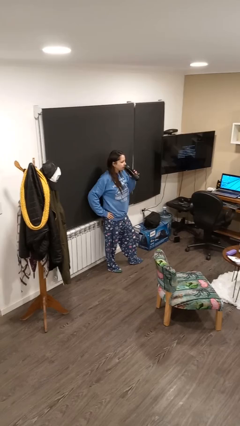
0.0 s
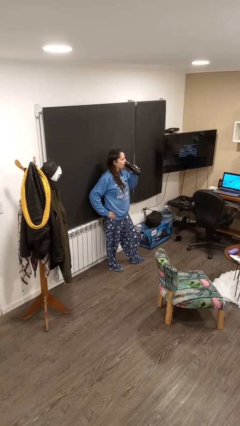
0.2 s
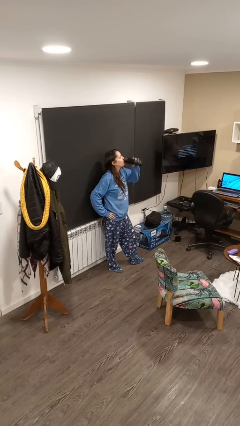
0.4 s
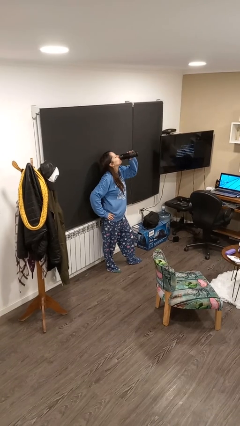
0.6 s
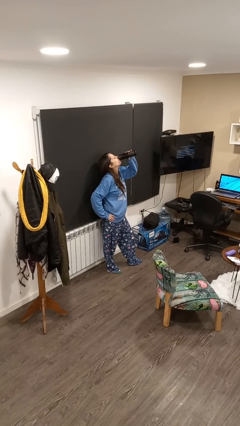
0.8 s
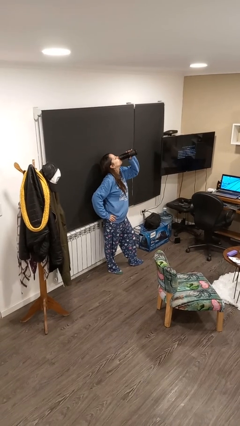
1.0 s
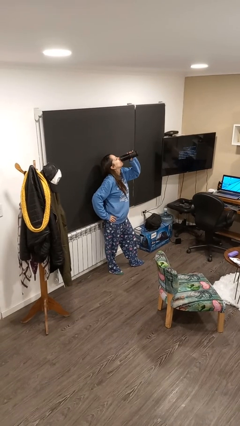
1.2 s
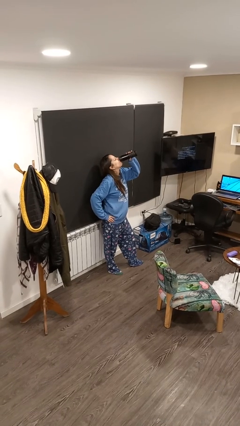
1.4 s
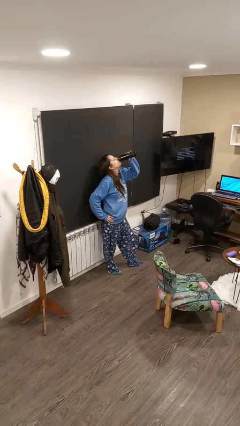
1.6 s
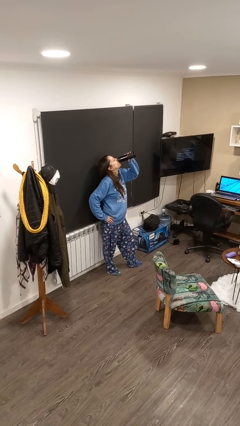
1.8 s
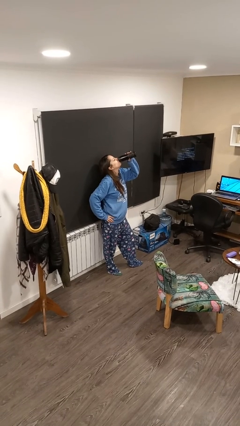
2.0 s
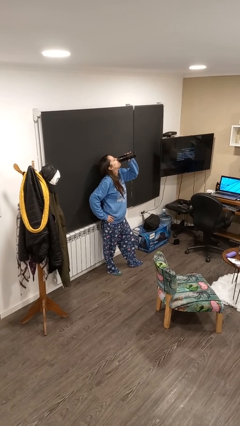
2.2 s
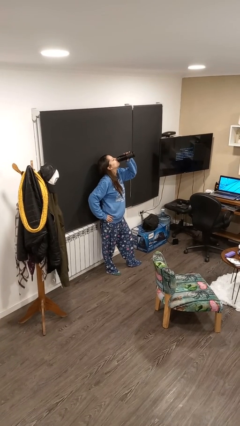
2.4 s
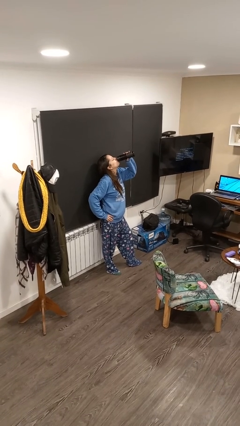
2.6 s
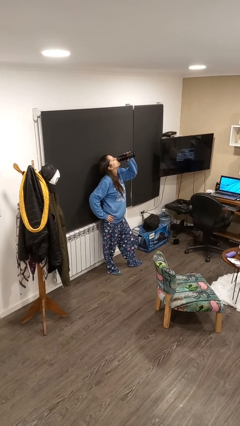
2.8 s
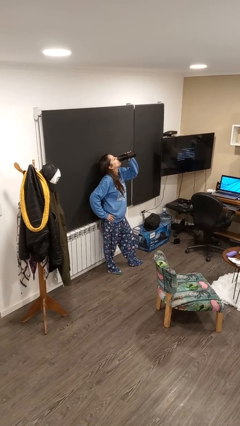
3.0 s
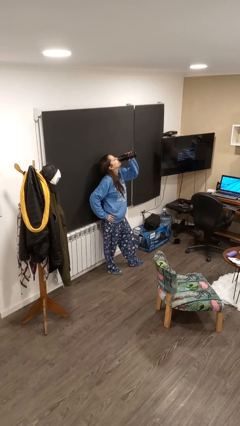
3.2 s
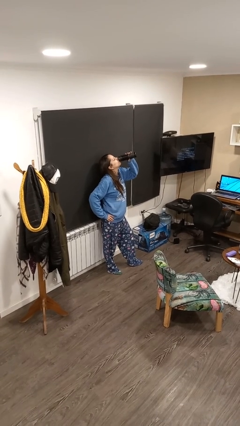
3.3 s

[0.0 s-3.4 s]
person drinks from bottle

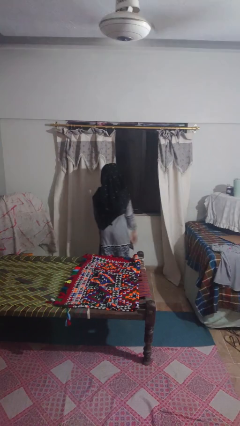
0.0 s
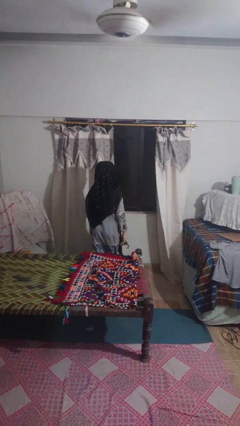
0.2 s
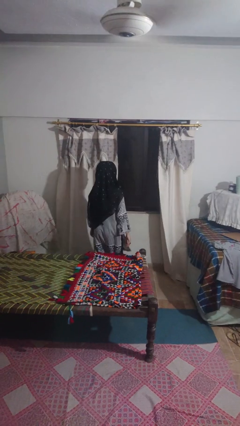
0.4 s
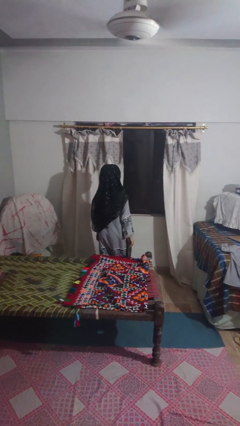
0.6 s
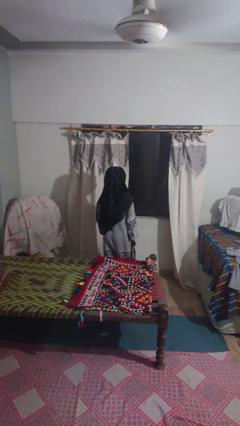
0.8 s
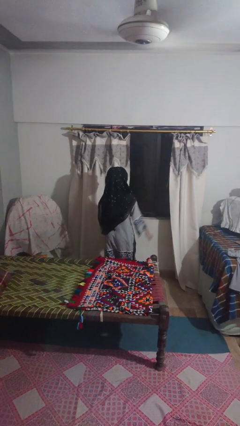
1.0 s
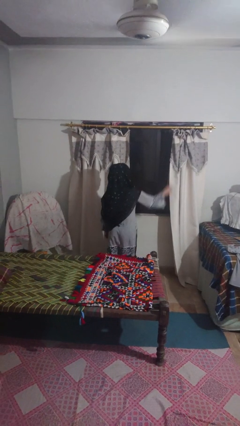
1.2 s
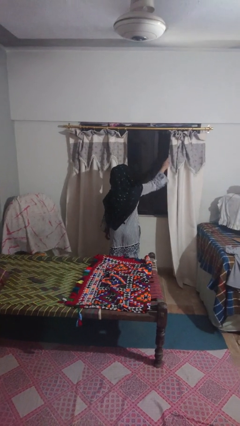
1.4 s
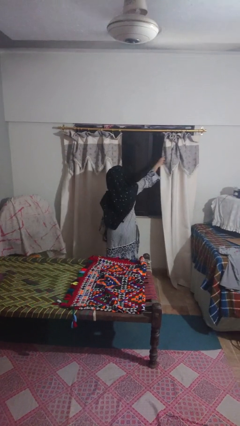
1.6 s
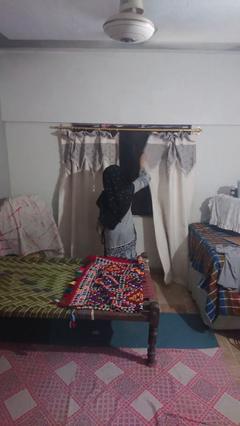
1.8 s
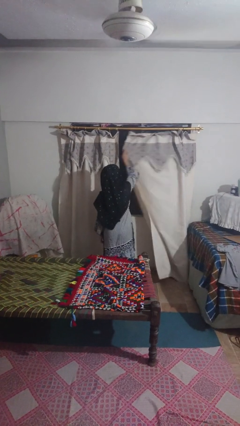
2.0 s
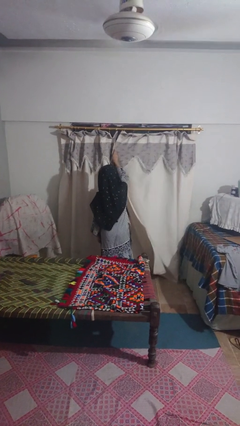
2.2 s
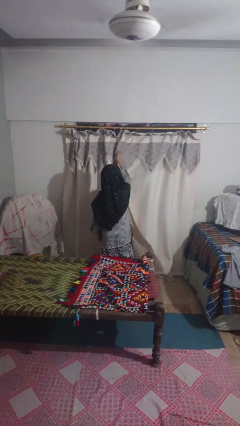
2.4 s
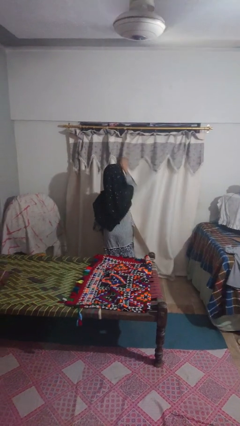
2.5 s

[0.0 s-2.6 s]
person closes curtains

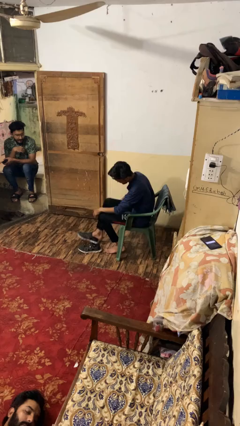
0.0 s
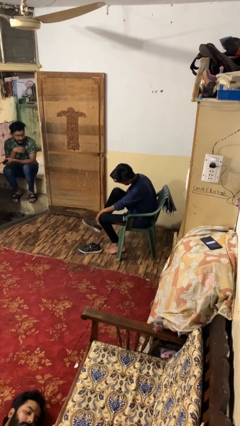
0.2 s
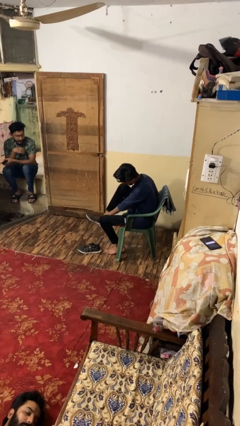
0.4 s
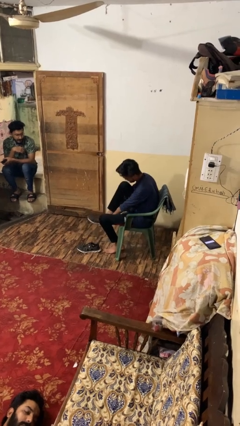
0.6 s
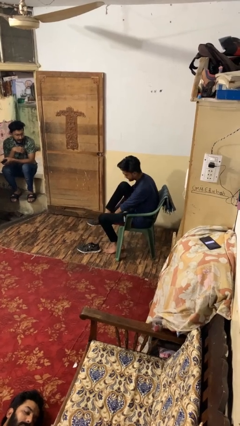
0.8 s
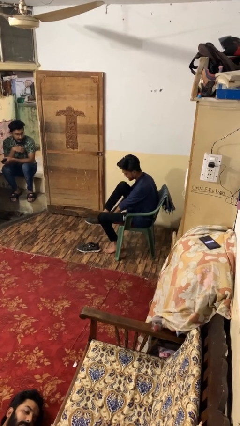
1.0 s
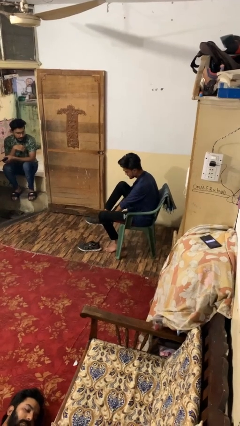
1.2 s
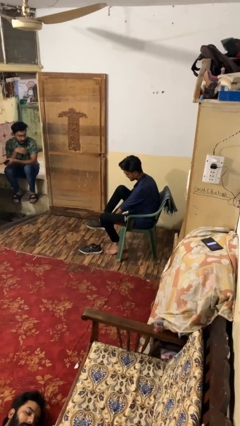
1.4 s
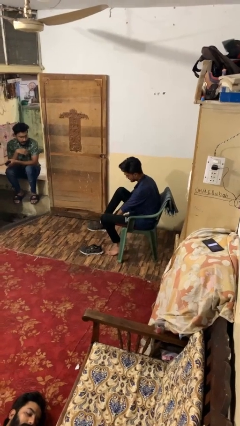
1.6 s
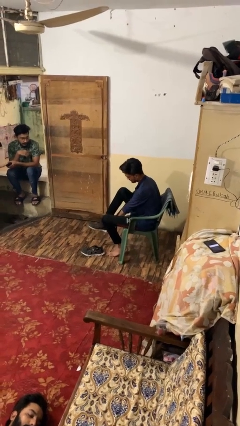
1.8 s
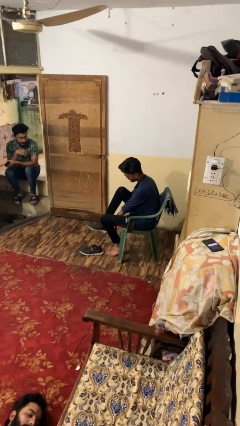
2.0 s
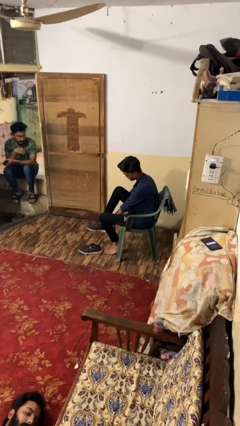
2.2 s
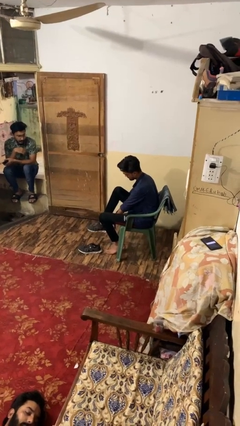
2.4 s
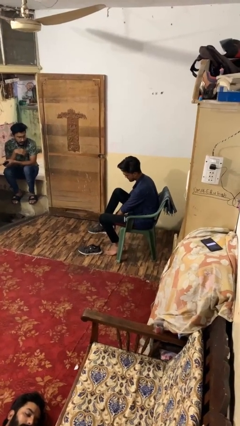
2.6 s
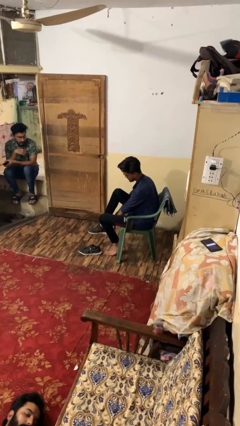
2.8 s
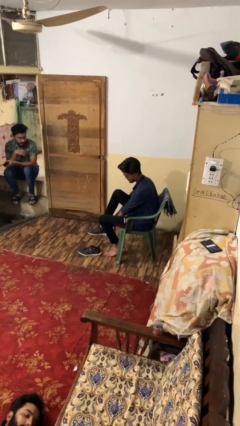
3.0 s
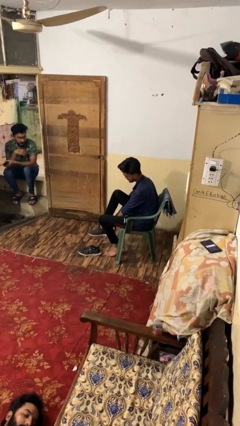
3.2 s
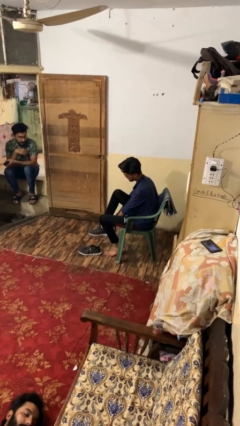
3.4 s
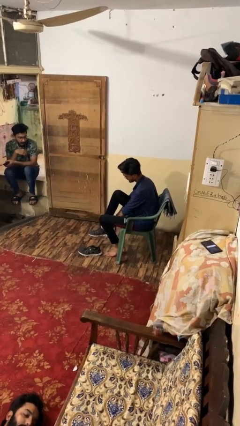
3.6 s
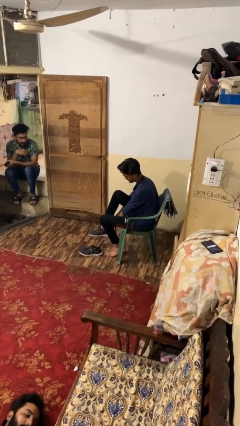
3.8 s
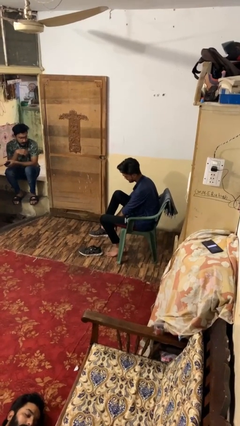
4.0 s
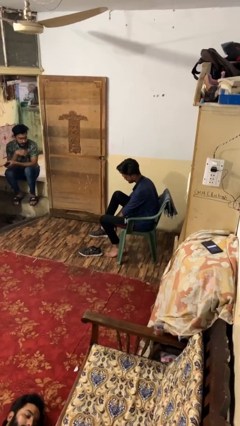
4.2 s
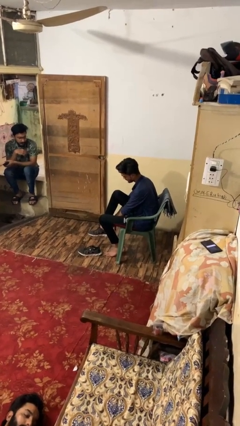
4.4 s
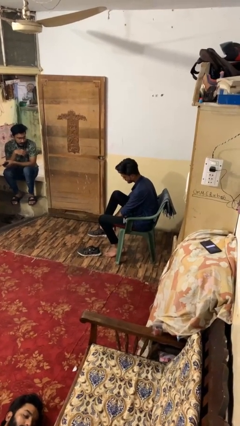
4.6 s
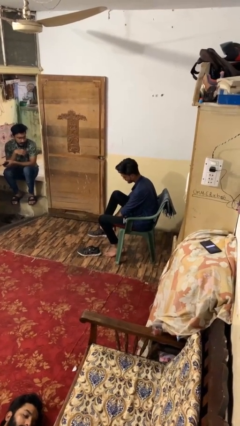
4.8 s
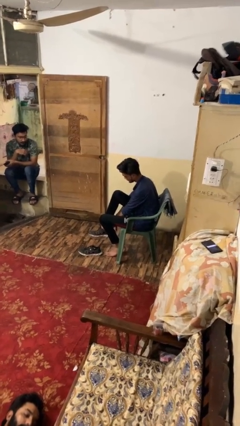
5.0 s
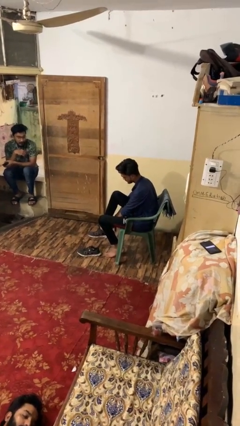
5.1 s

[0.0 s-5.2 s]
person puts on boots

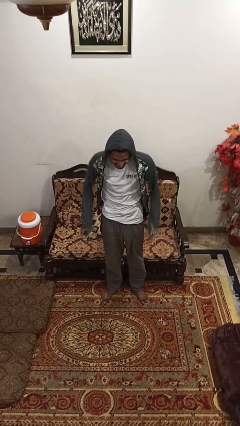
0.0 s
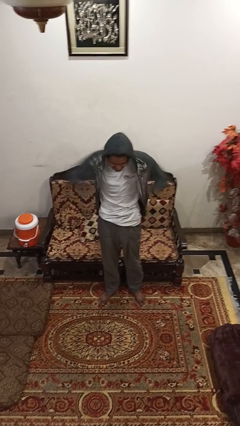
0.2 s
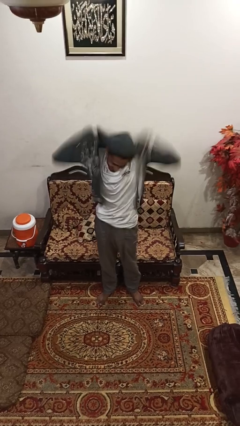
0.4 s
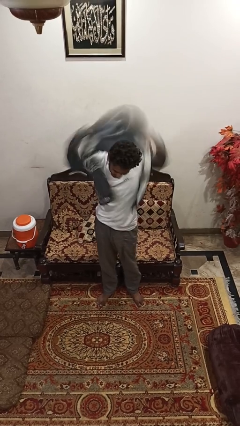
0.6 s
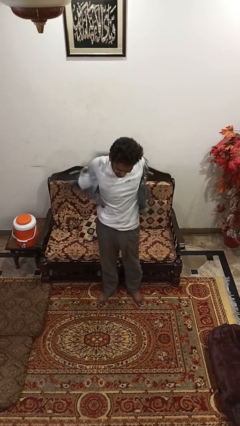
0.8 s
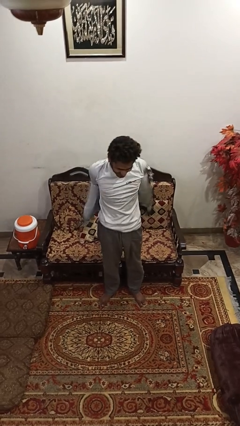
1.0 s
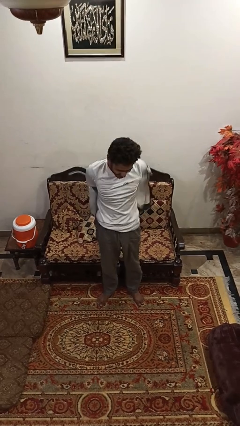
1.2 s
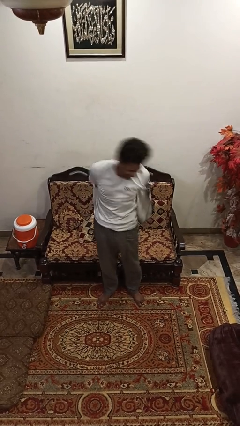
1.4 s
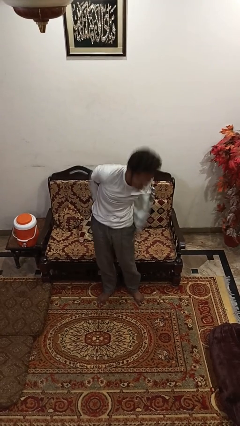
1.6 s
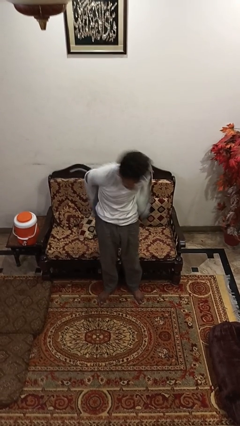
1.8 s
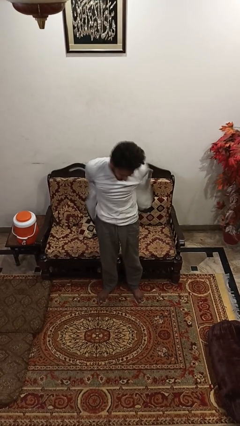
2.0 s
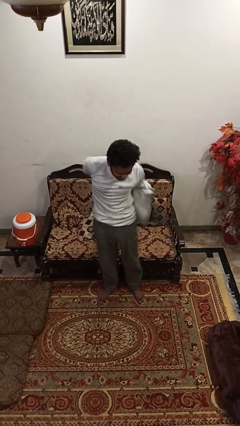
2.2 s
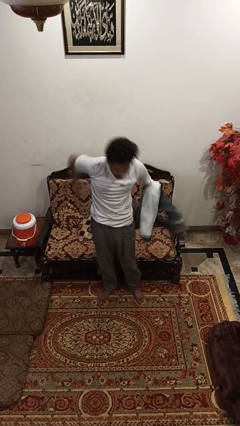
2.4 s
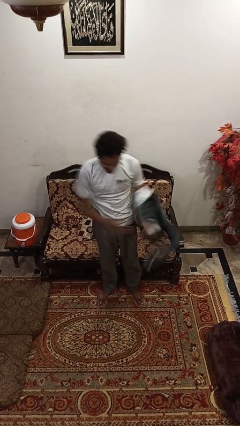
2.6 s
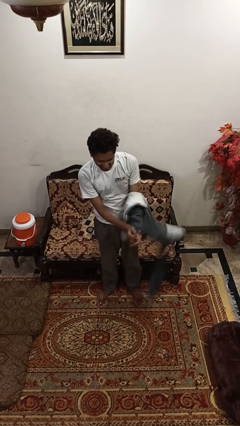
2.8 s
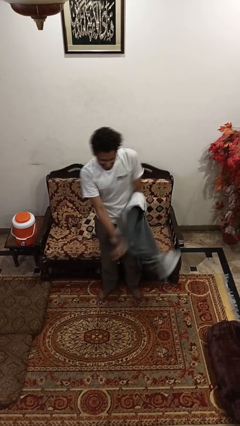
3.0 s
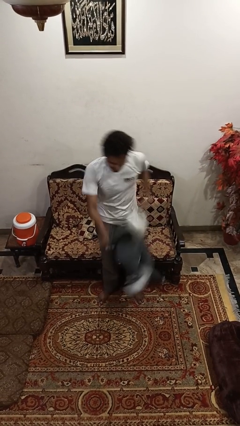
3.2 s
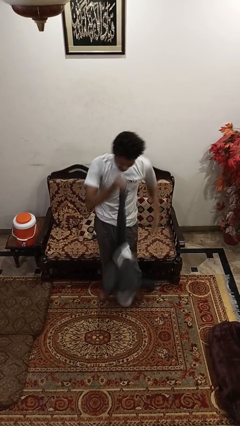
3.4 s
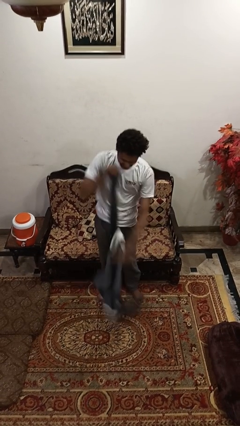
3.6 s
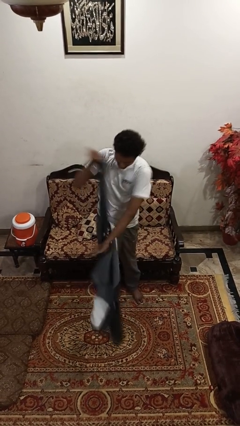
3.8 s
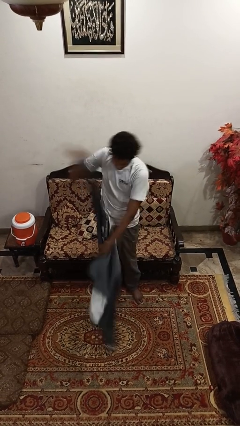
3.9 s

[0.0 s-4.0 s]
person takes off hoodie

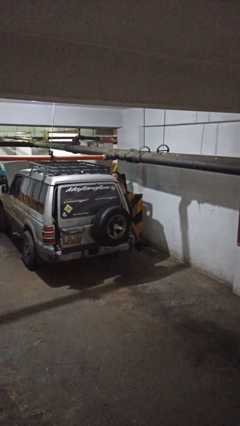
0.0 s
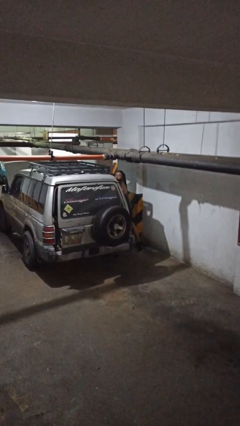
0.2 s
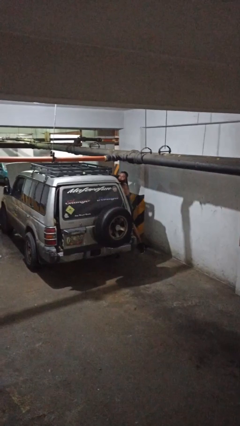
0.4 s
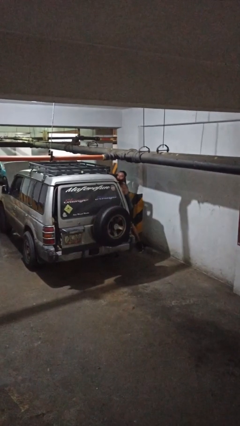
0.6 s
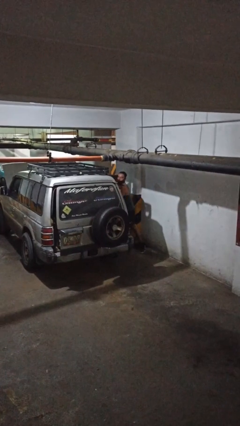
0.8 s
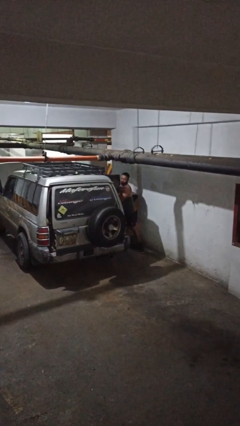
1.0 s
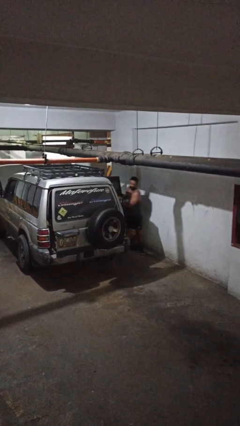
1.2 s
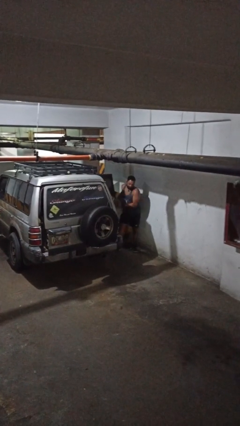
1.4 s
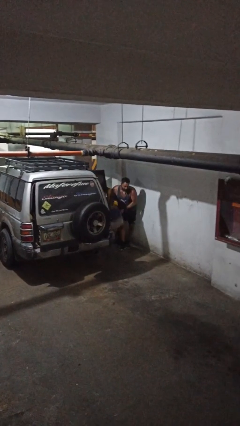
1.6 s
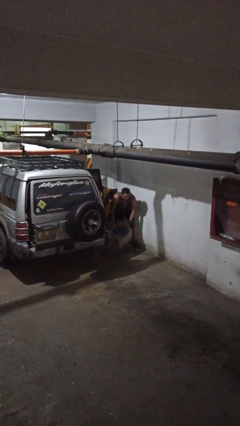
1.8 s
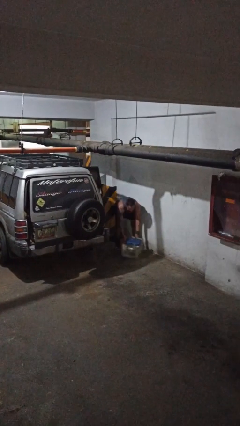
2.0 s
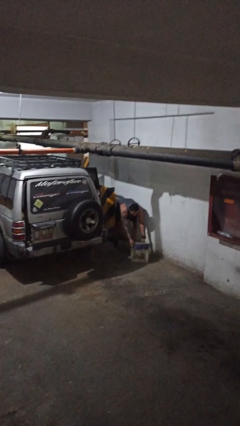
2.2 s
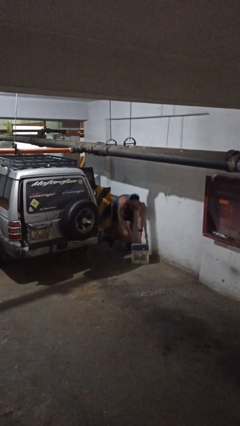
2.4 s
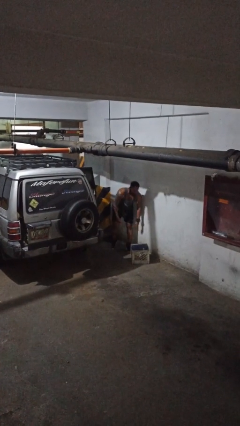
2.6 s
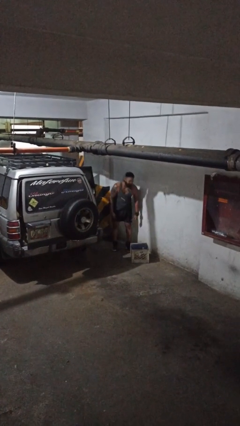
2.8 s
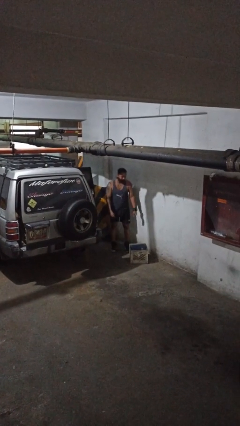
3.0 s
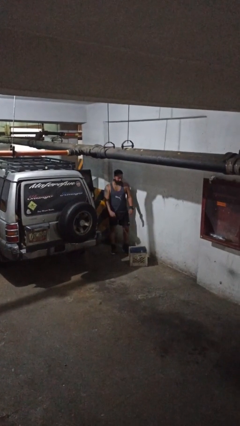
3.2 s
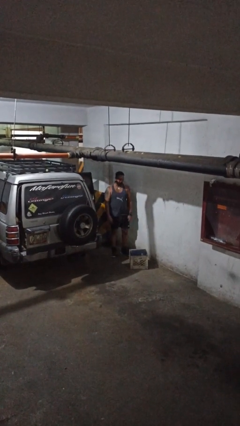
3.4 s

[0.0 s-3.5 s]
person unloads car
